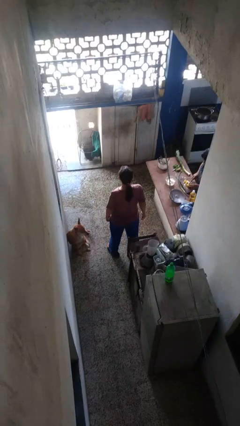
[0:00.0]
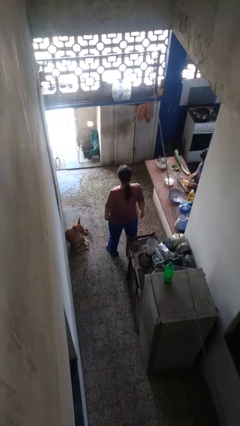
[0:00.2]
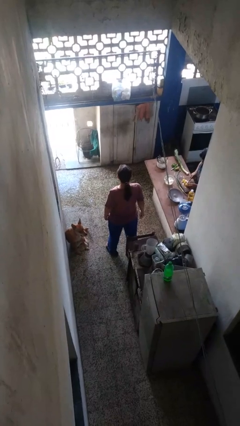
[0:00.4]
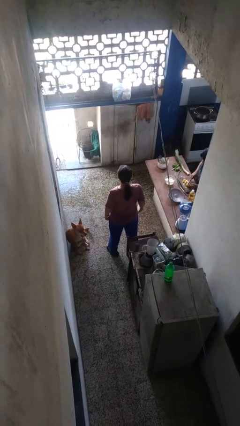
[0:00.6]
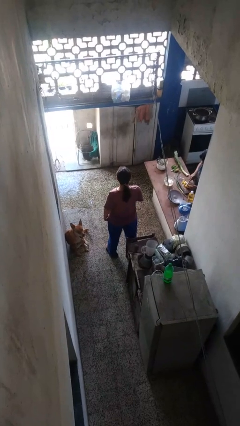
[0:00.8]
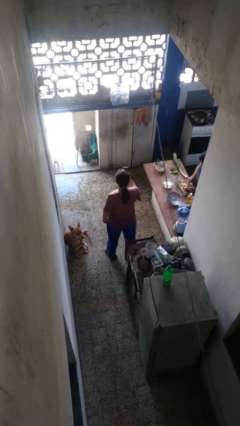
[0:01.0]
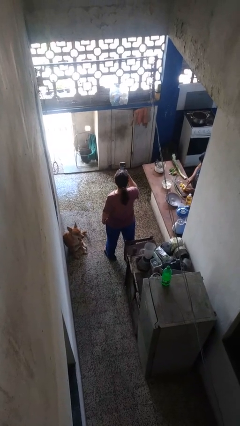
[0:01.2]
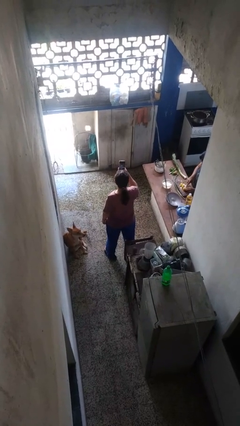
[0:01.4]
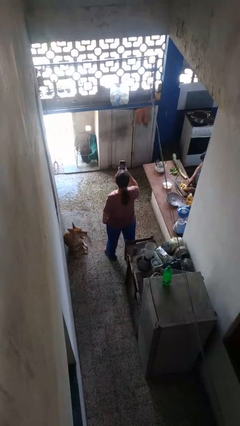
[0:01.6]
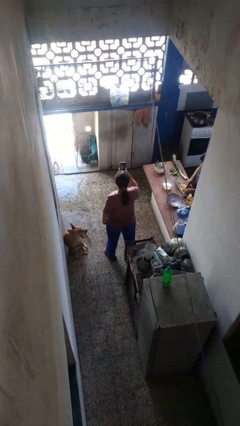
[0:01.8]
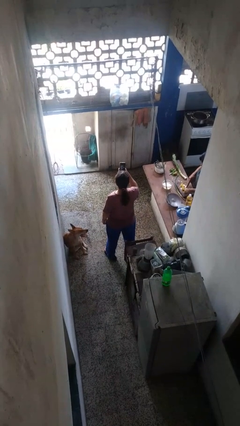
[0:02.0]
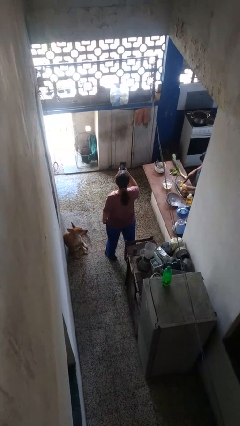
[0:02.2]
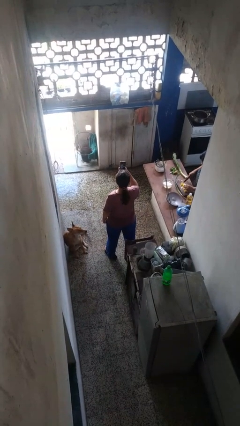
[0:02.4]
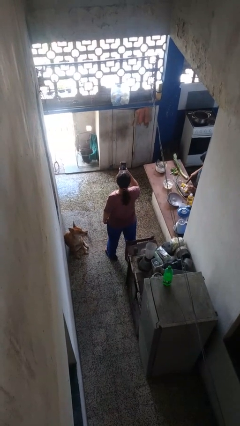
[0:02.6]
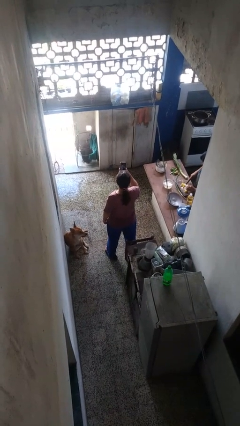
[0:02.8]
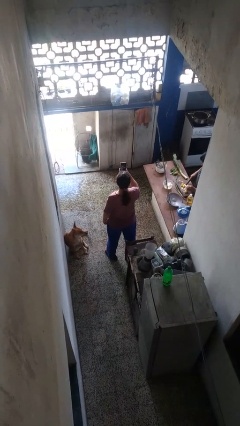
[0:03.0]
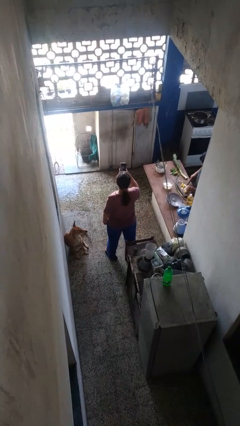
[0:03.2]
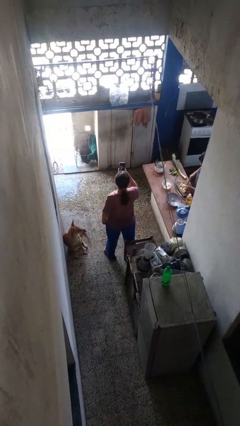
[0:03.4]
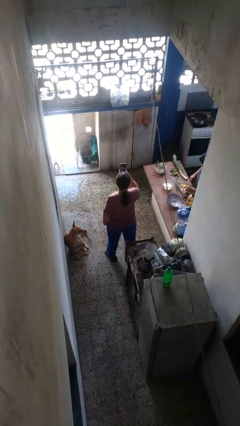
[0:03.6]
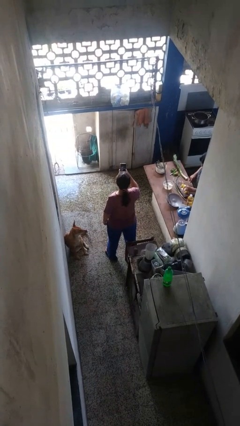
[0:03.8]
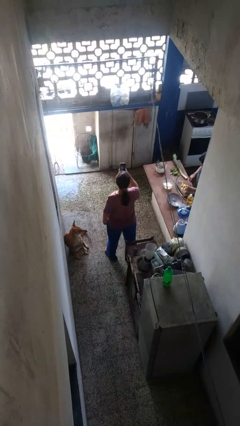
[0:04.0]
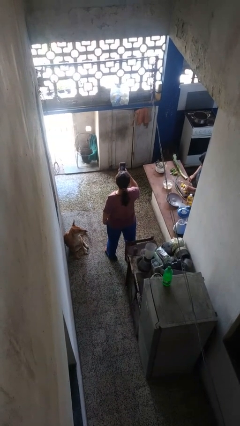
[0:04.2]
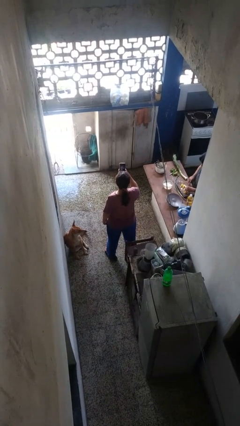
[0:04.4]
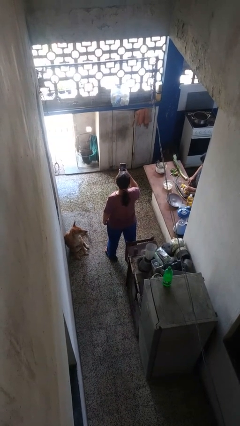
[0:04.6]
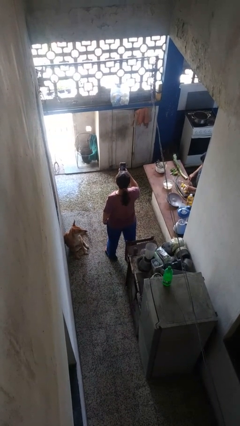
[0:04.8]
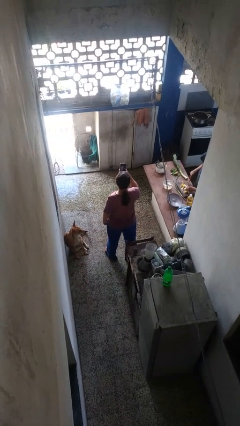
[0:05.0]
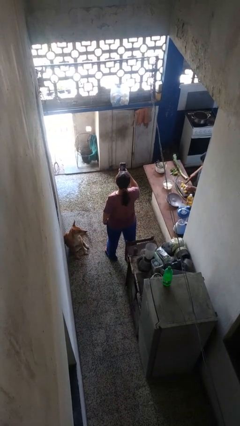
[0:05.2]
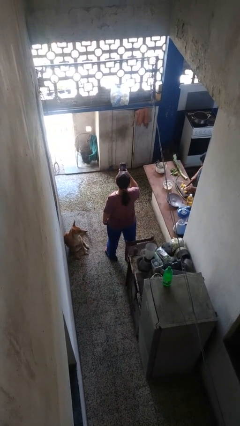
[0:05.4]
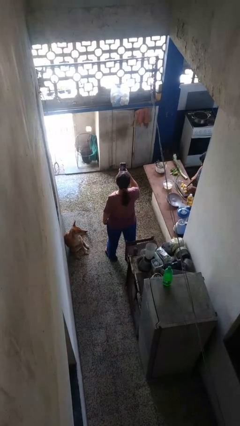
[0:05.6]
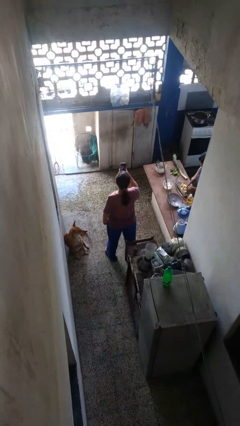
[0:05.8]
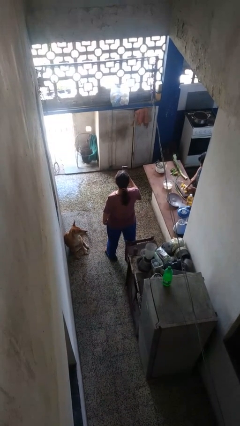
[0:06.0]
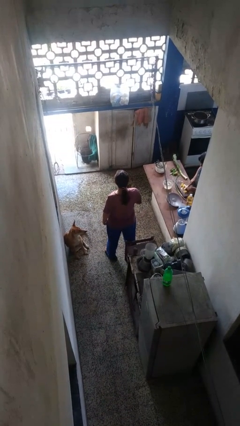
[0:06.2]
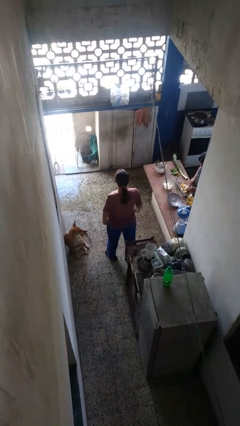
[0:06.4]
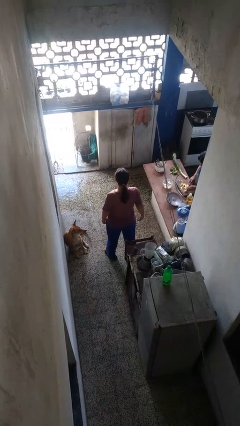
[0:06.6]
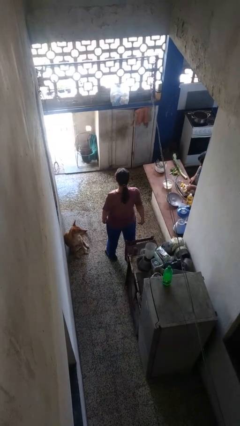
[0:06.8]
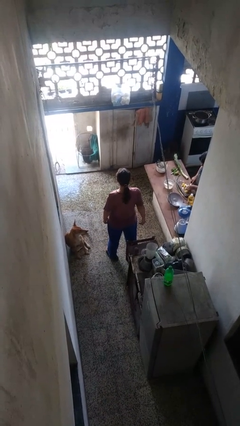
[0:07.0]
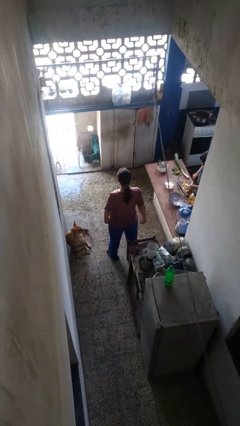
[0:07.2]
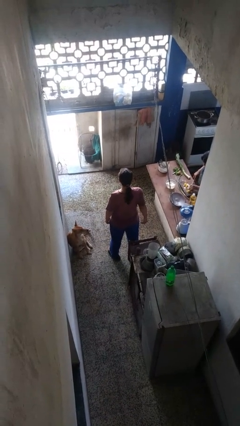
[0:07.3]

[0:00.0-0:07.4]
person takes selfie

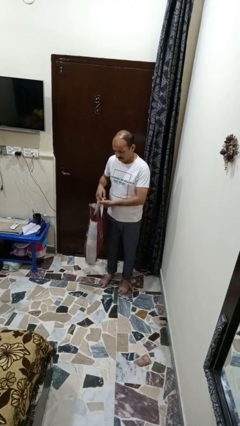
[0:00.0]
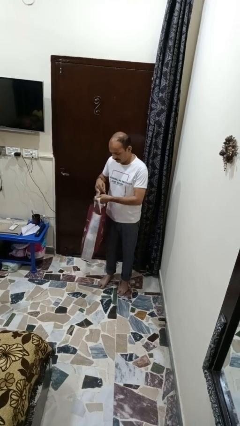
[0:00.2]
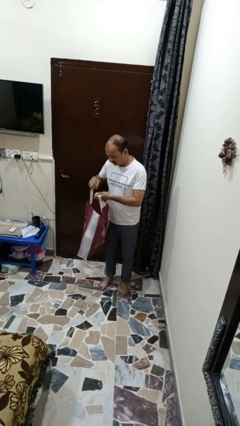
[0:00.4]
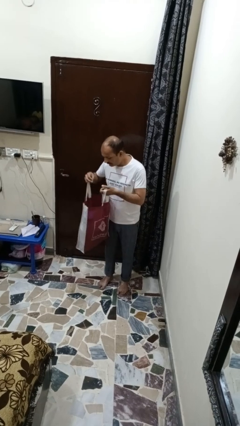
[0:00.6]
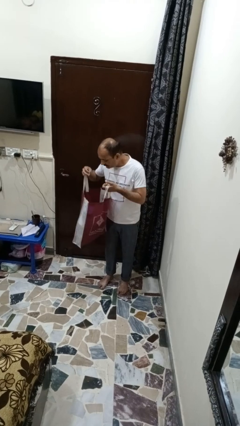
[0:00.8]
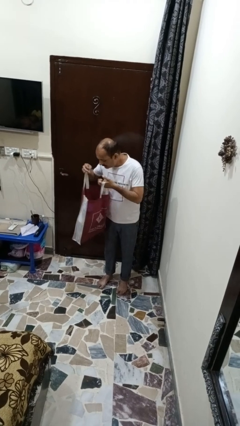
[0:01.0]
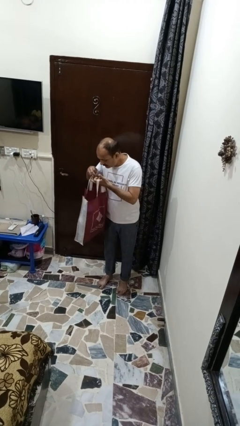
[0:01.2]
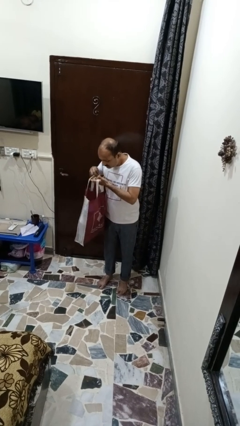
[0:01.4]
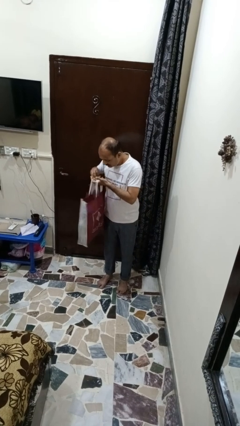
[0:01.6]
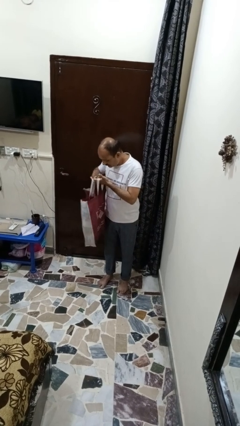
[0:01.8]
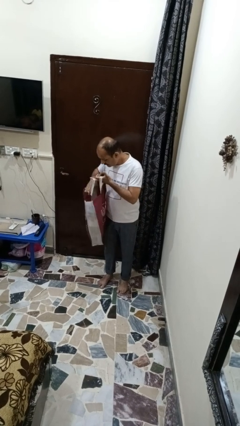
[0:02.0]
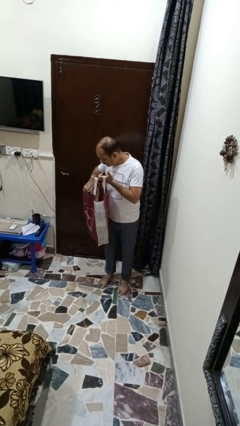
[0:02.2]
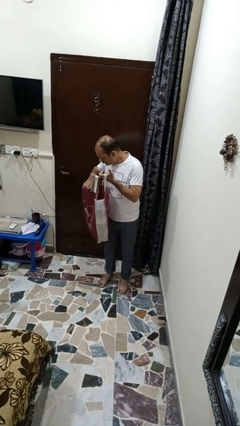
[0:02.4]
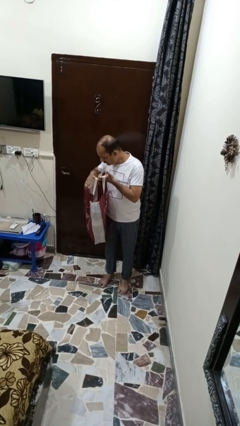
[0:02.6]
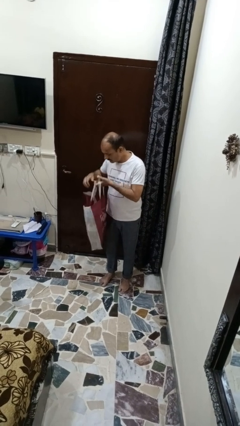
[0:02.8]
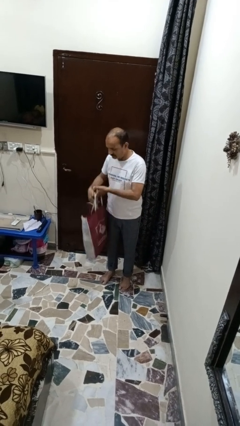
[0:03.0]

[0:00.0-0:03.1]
person searches in bag

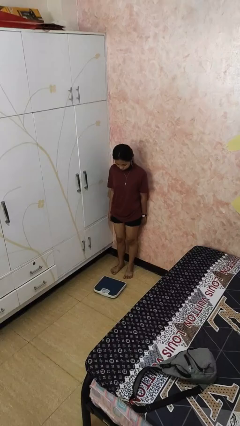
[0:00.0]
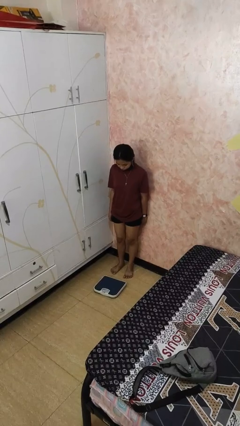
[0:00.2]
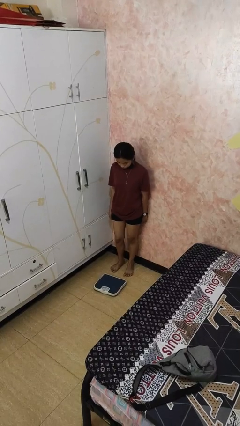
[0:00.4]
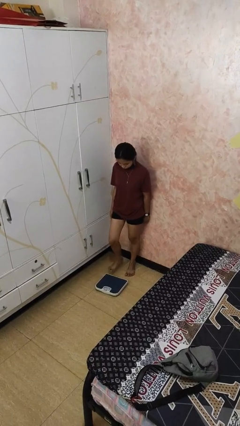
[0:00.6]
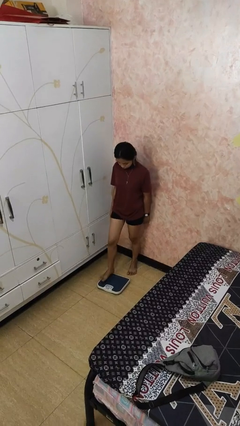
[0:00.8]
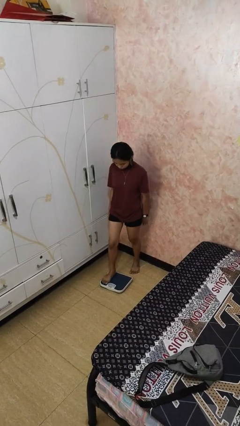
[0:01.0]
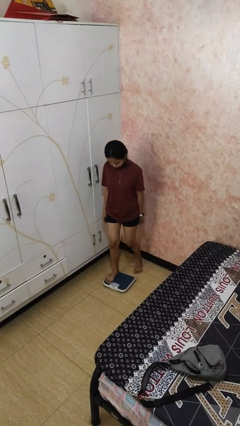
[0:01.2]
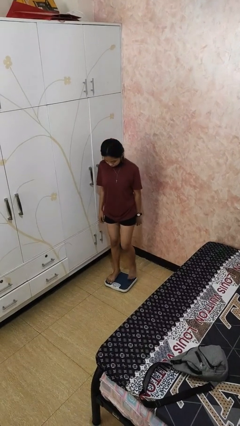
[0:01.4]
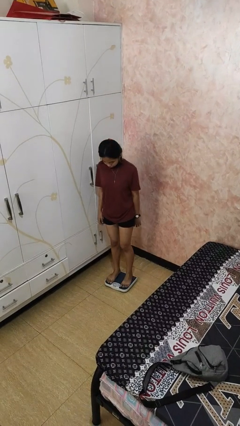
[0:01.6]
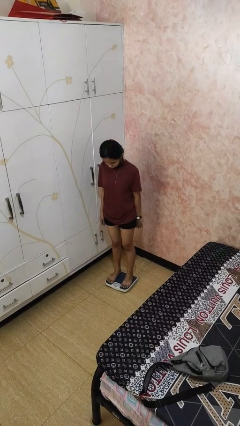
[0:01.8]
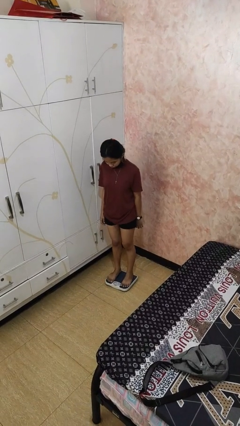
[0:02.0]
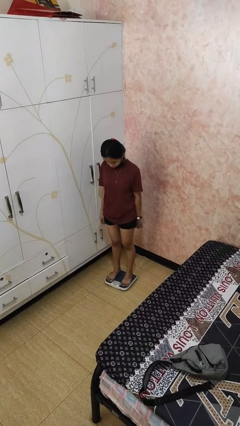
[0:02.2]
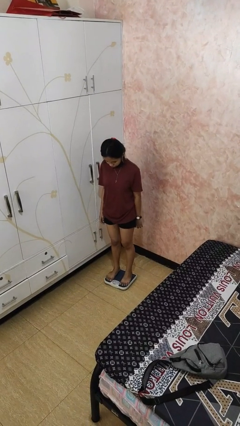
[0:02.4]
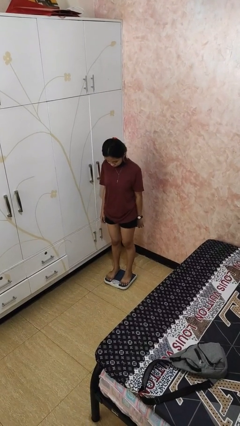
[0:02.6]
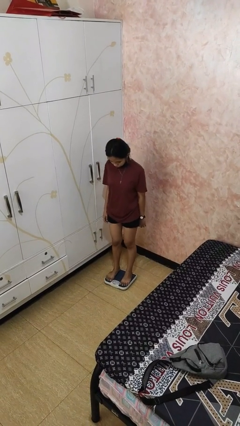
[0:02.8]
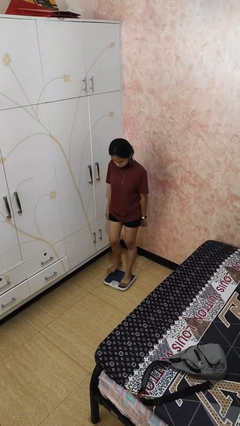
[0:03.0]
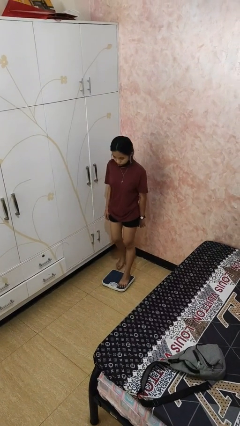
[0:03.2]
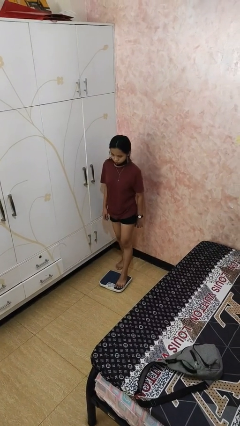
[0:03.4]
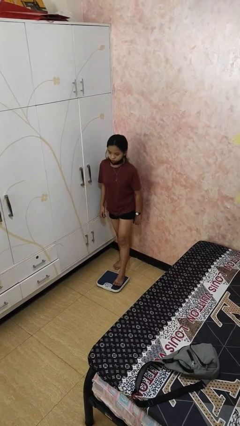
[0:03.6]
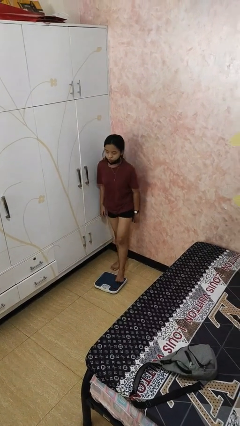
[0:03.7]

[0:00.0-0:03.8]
person uses bodyweight scale

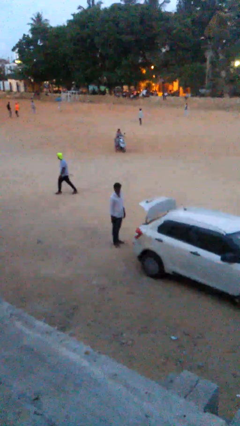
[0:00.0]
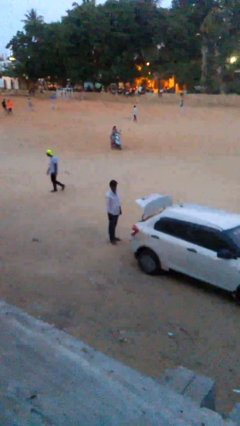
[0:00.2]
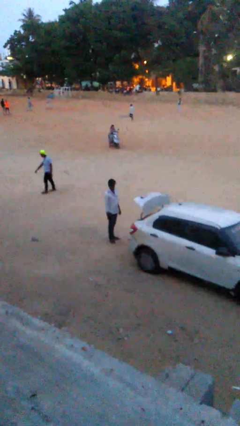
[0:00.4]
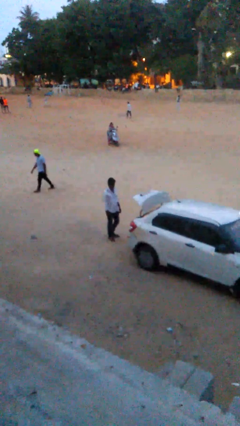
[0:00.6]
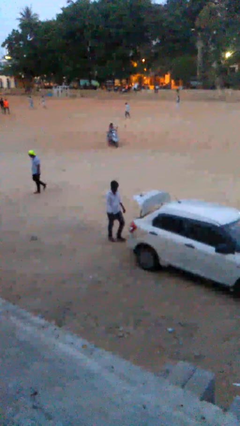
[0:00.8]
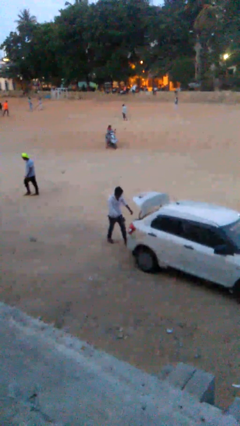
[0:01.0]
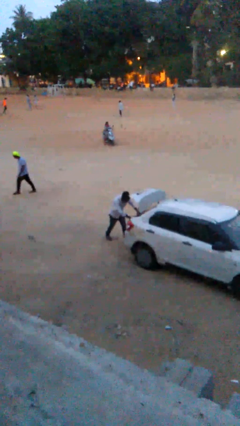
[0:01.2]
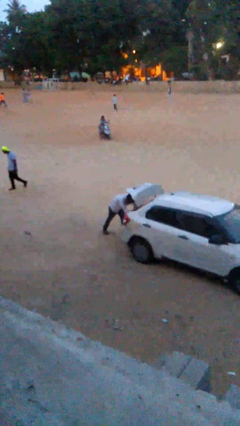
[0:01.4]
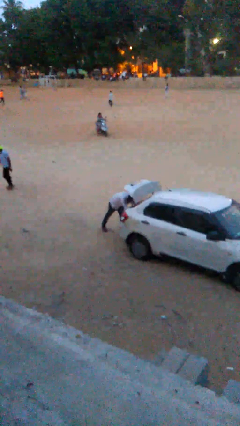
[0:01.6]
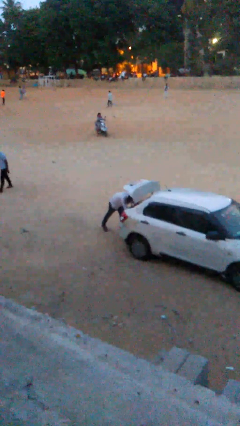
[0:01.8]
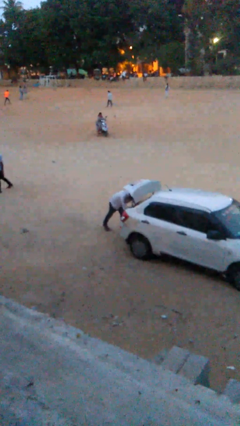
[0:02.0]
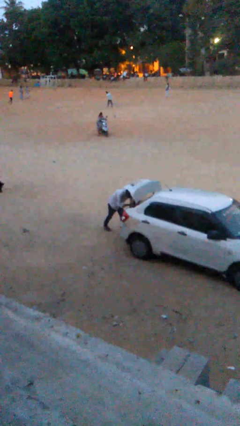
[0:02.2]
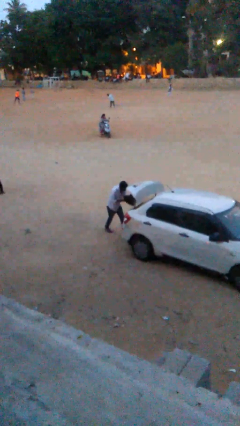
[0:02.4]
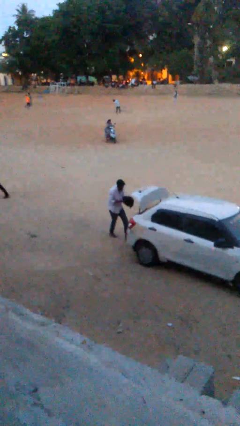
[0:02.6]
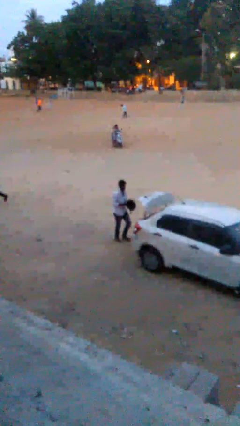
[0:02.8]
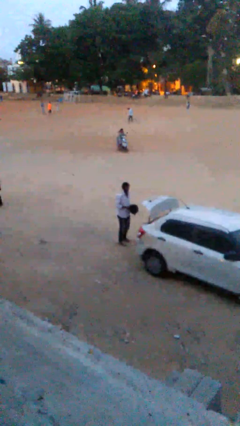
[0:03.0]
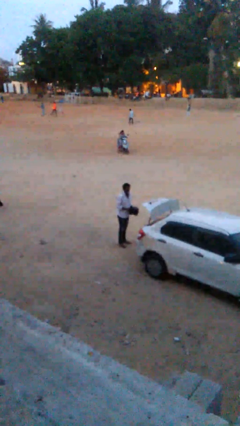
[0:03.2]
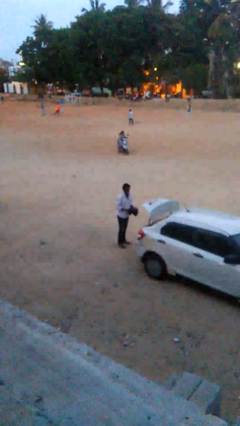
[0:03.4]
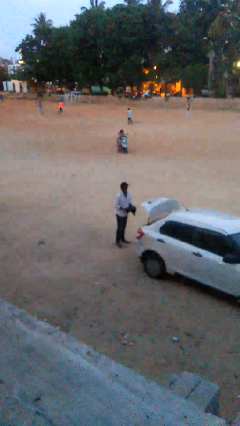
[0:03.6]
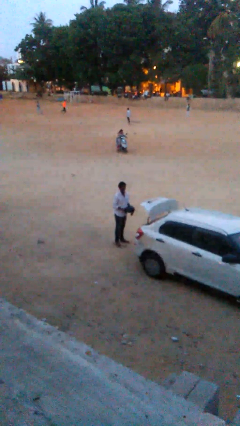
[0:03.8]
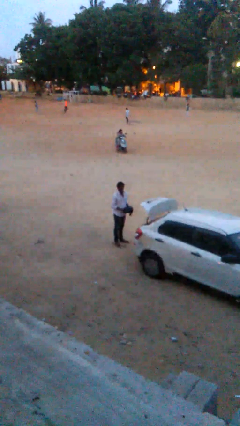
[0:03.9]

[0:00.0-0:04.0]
person unloads car
